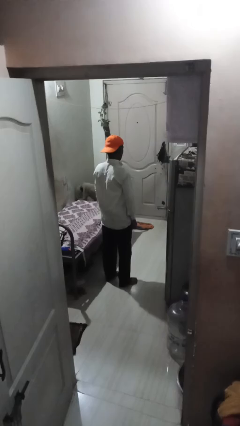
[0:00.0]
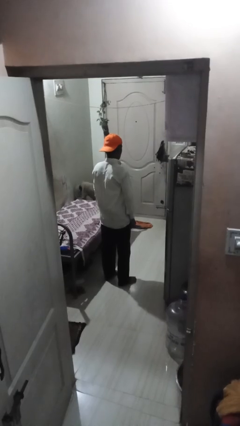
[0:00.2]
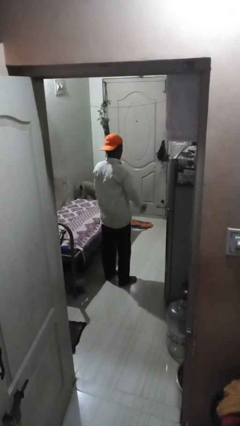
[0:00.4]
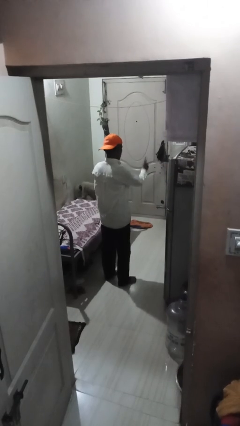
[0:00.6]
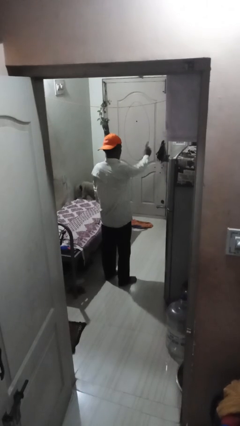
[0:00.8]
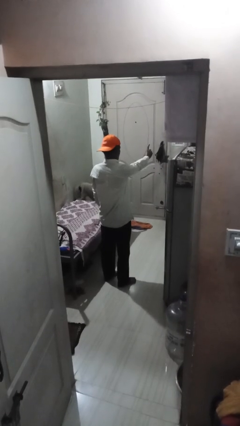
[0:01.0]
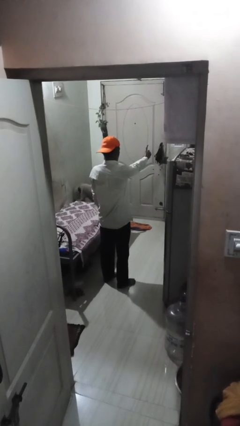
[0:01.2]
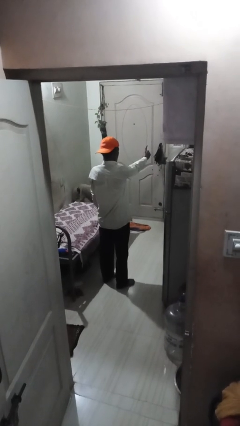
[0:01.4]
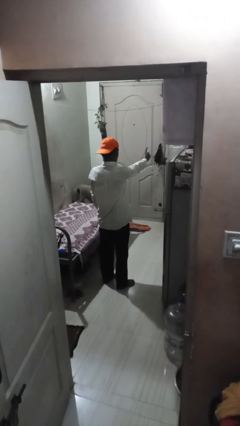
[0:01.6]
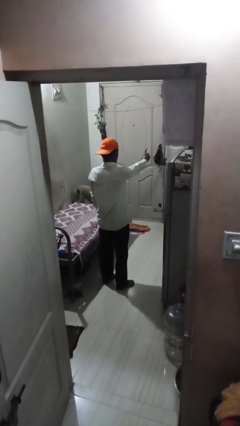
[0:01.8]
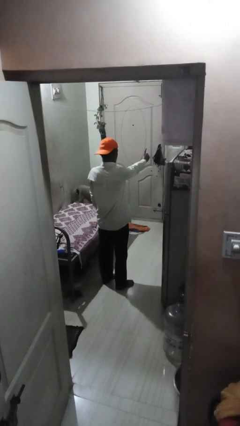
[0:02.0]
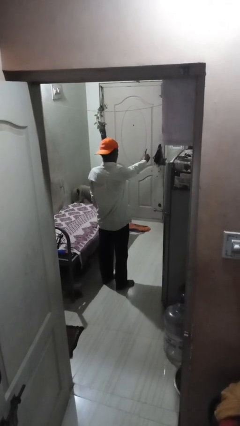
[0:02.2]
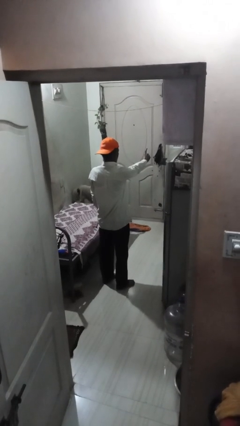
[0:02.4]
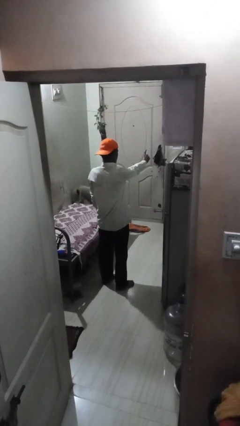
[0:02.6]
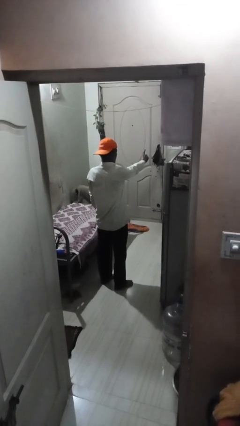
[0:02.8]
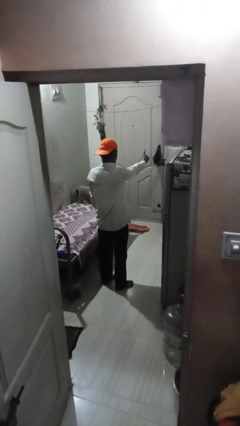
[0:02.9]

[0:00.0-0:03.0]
person points at person

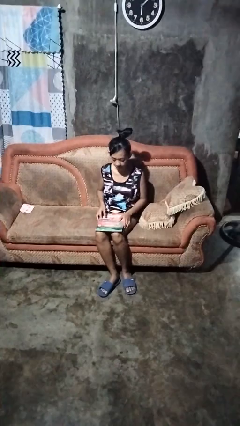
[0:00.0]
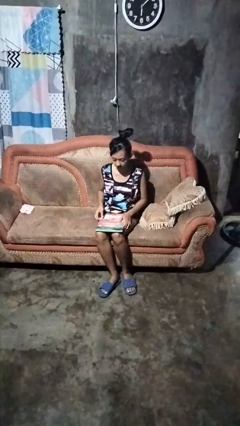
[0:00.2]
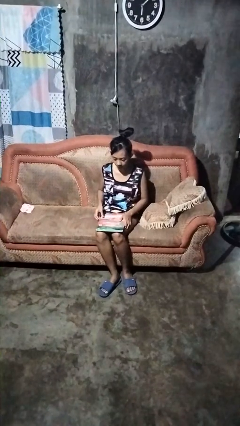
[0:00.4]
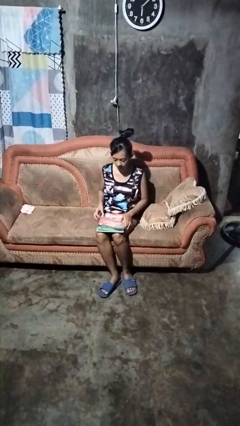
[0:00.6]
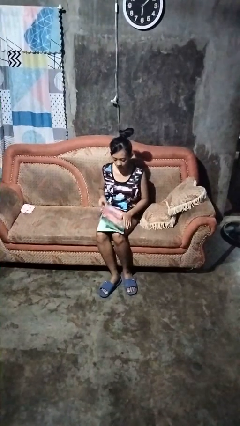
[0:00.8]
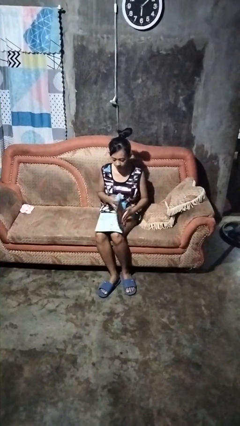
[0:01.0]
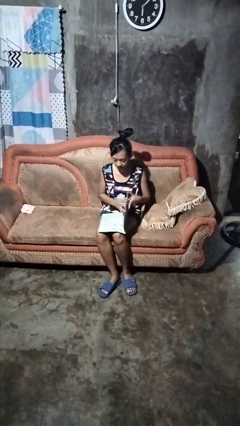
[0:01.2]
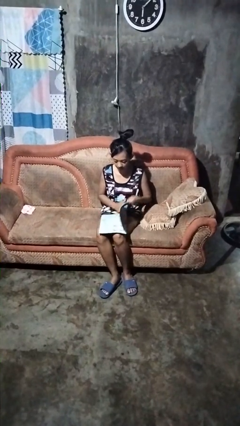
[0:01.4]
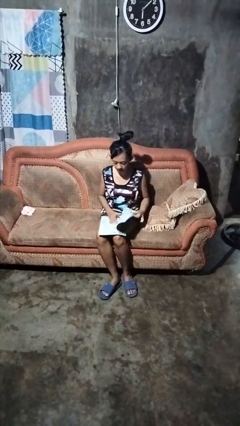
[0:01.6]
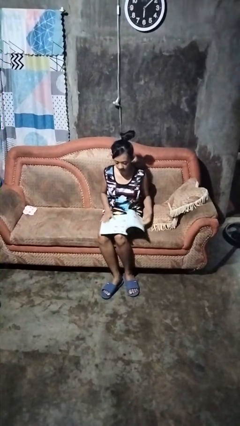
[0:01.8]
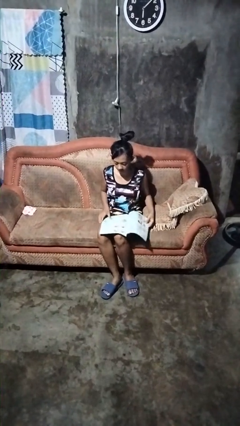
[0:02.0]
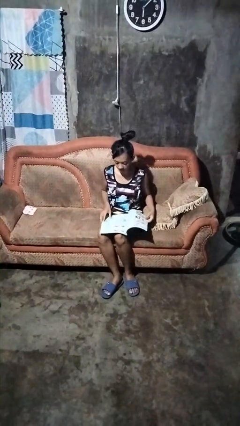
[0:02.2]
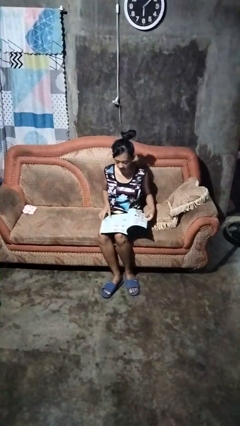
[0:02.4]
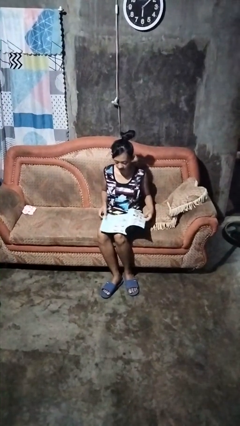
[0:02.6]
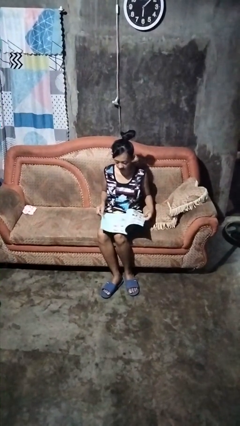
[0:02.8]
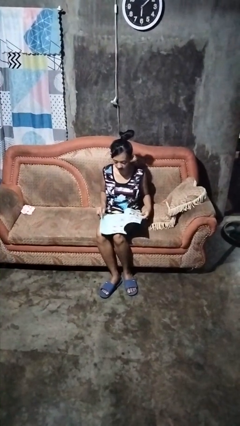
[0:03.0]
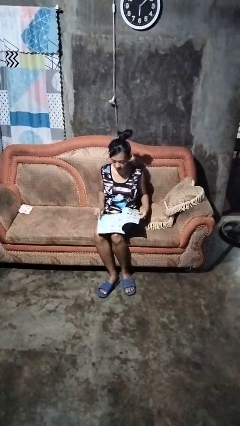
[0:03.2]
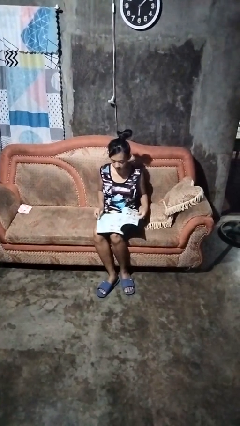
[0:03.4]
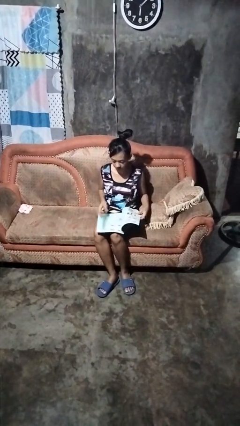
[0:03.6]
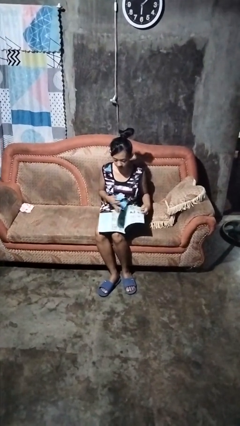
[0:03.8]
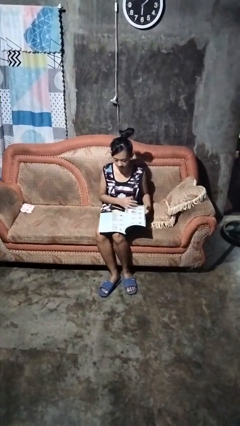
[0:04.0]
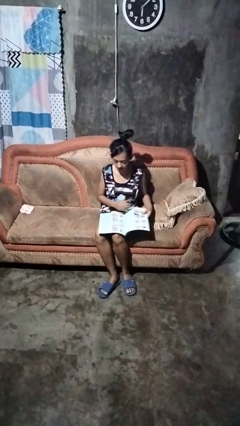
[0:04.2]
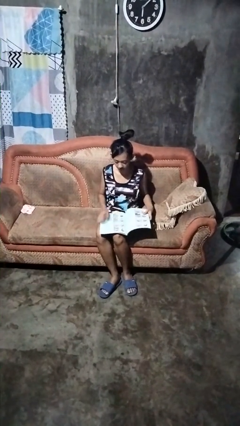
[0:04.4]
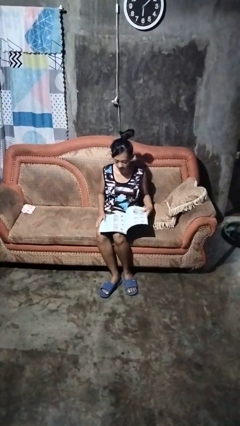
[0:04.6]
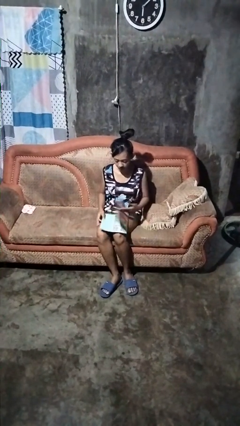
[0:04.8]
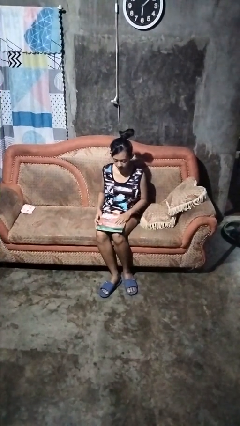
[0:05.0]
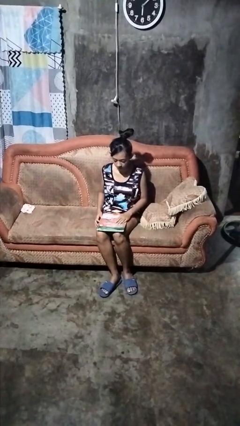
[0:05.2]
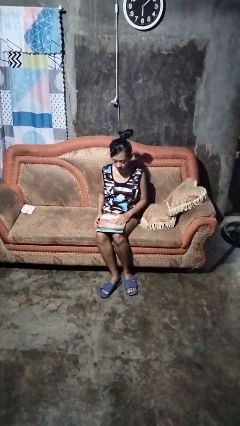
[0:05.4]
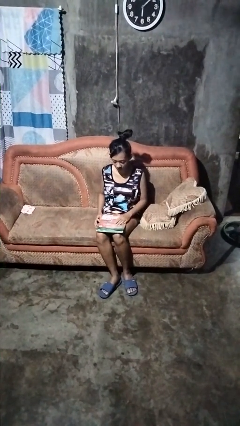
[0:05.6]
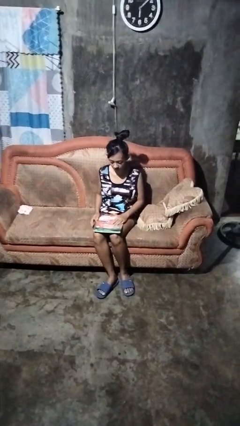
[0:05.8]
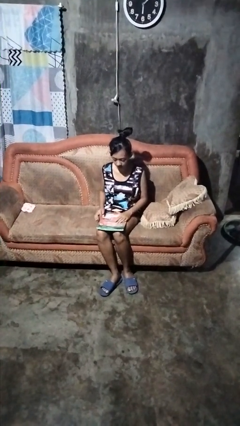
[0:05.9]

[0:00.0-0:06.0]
person reads magazine

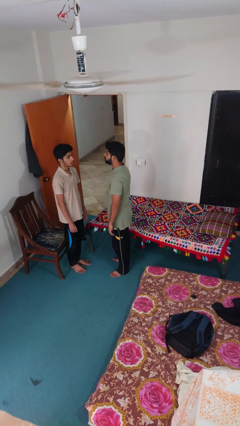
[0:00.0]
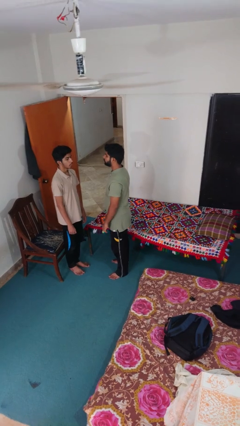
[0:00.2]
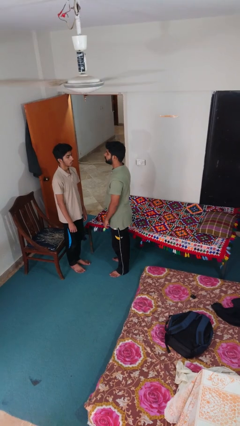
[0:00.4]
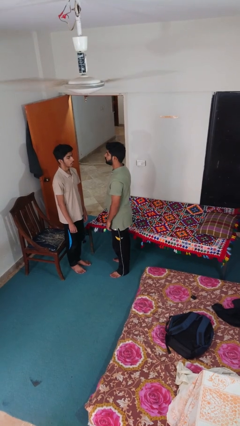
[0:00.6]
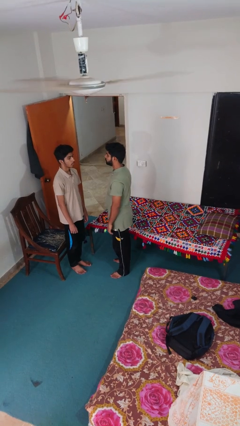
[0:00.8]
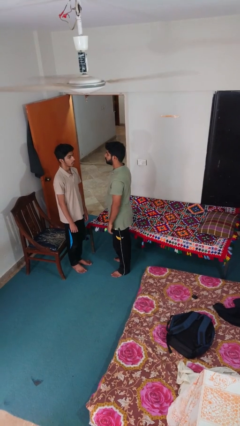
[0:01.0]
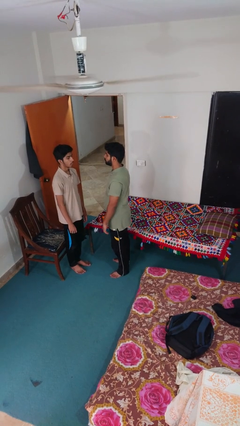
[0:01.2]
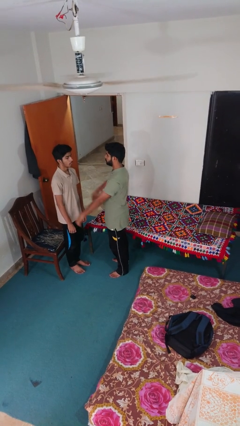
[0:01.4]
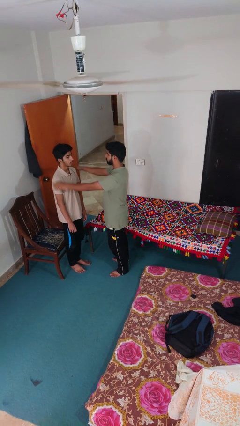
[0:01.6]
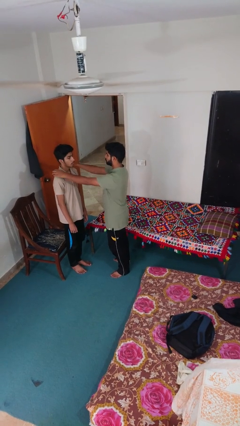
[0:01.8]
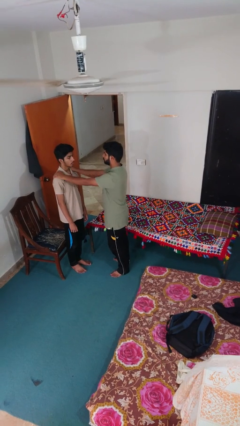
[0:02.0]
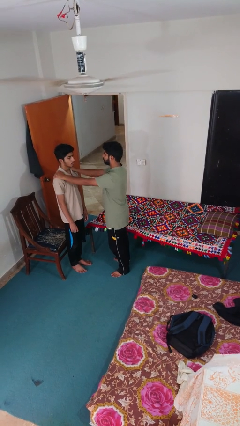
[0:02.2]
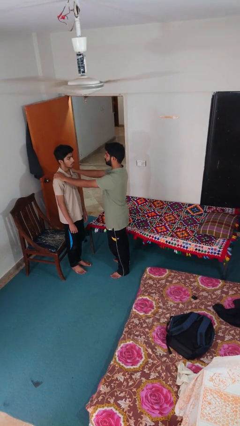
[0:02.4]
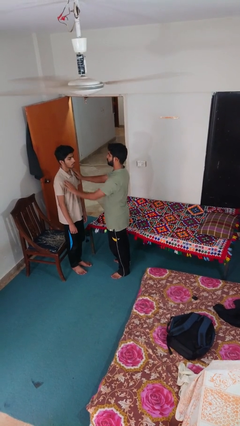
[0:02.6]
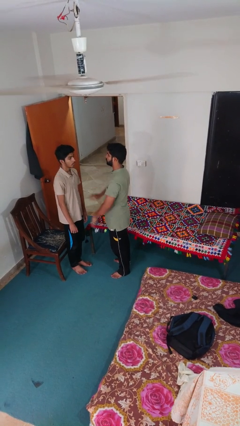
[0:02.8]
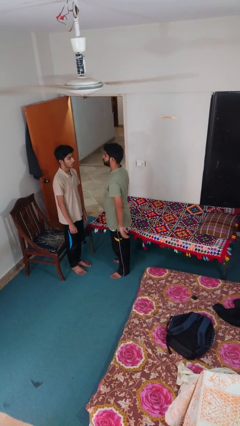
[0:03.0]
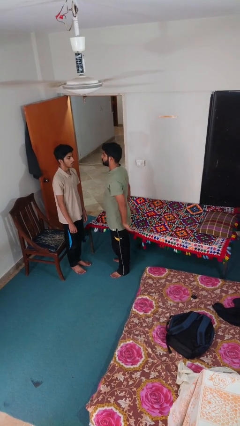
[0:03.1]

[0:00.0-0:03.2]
person pounds shoulders of person

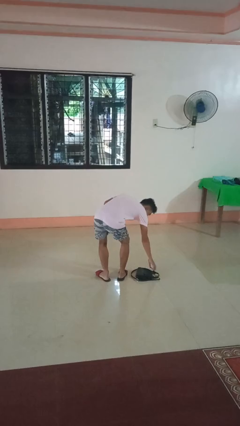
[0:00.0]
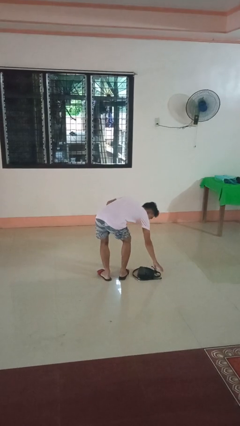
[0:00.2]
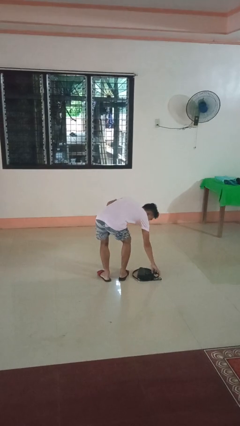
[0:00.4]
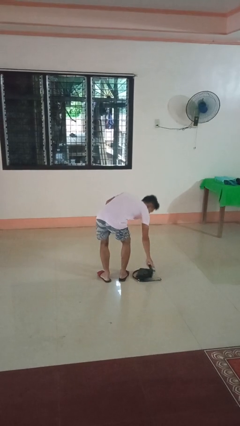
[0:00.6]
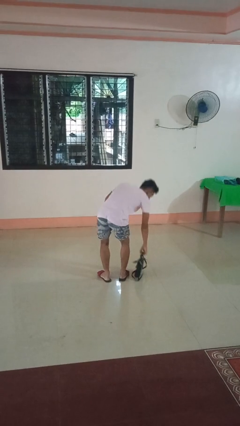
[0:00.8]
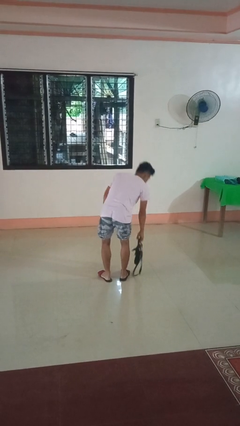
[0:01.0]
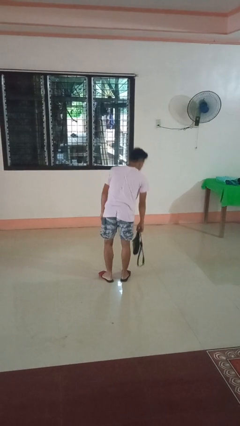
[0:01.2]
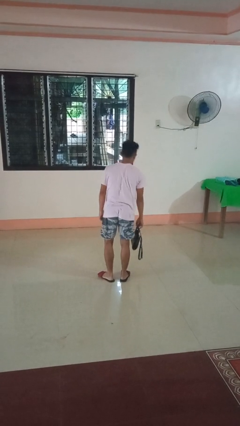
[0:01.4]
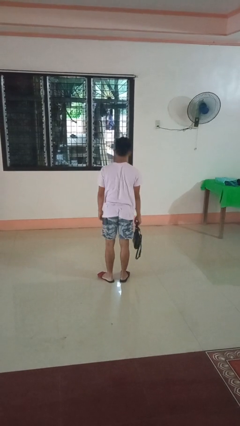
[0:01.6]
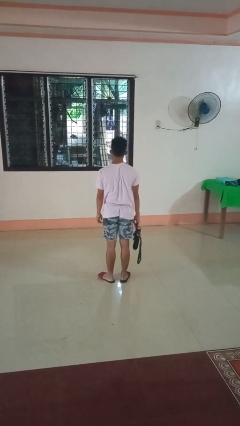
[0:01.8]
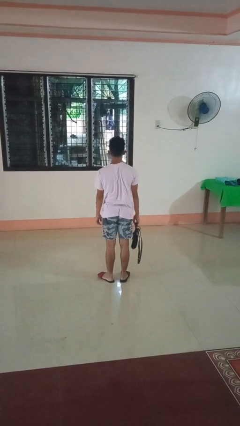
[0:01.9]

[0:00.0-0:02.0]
person picks up object from floor

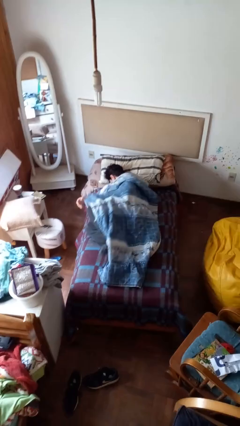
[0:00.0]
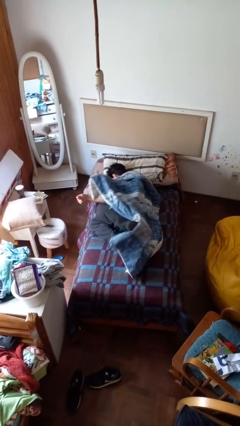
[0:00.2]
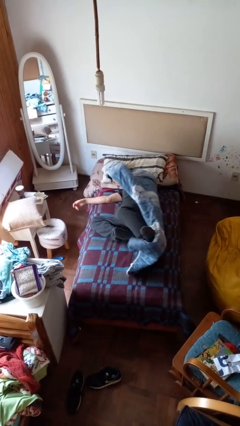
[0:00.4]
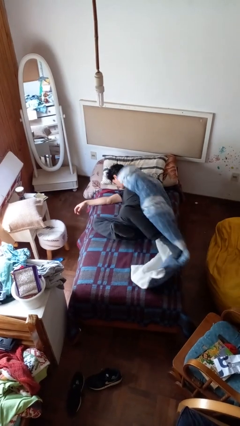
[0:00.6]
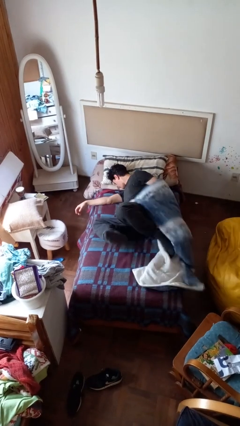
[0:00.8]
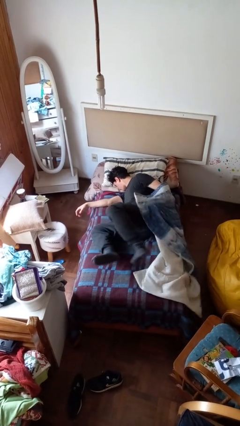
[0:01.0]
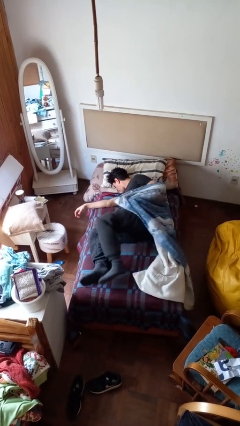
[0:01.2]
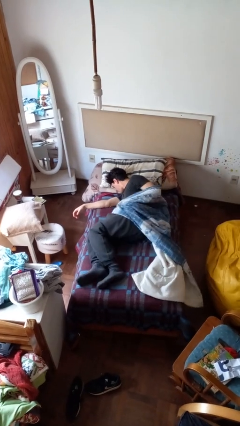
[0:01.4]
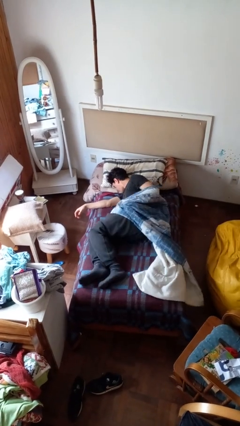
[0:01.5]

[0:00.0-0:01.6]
person uncovers with bedsheets

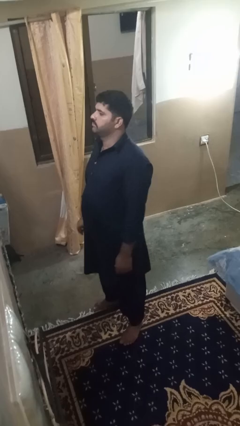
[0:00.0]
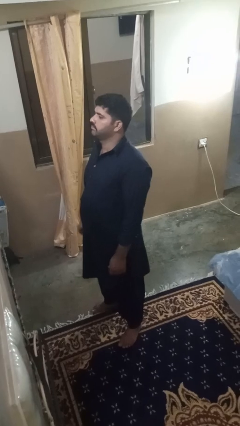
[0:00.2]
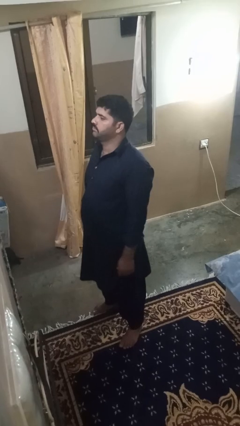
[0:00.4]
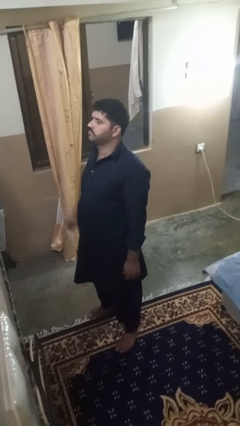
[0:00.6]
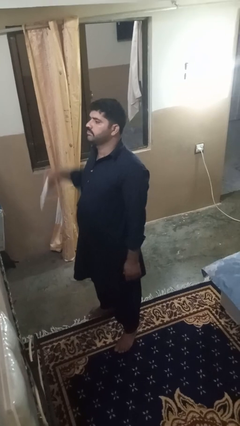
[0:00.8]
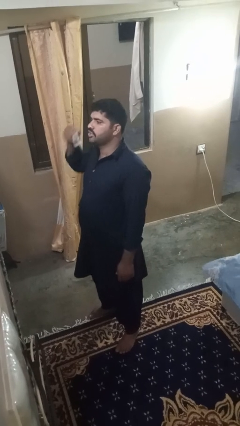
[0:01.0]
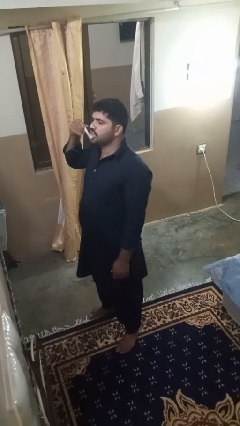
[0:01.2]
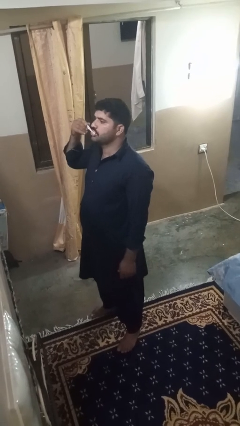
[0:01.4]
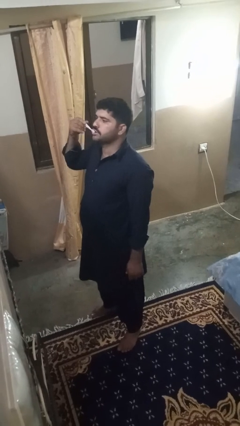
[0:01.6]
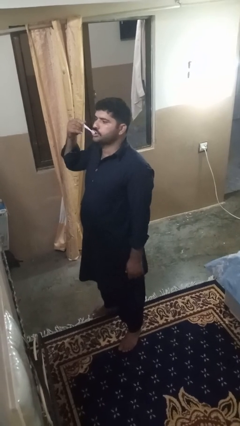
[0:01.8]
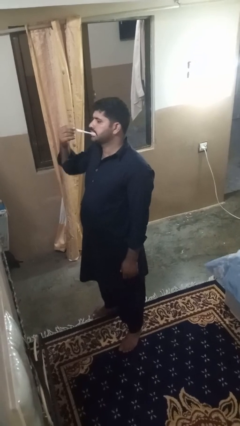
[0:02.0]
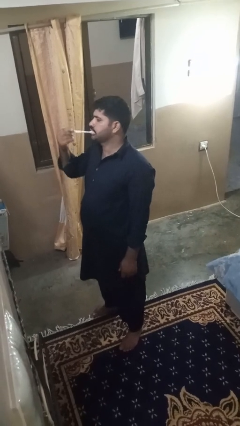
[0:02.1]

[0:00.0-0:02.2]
person brushes teeth
